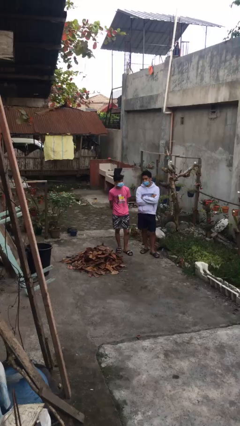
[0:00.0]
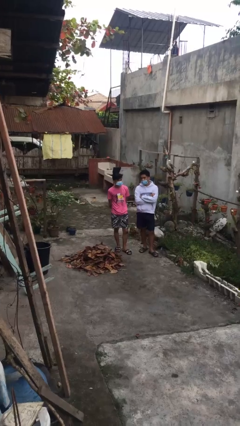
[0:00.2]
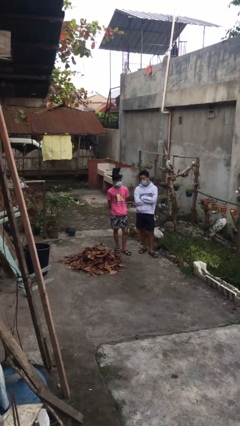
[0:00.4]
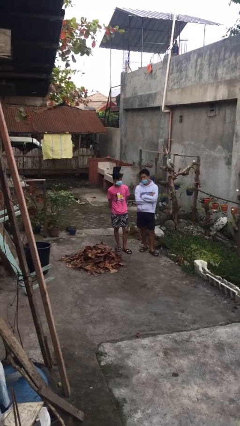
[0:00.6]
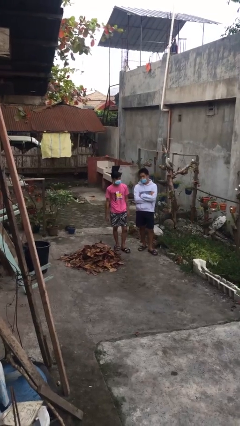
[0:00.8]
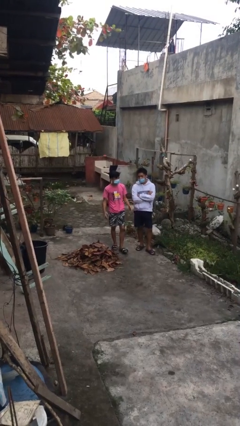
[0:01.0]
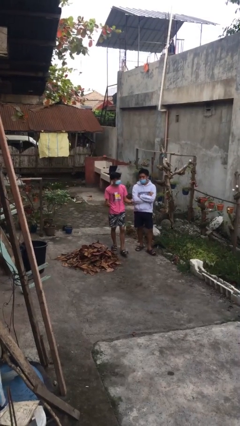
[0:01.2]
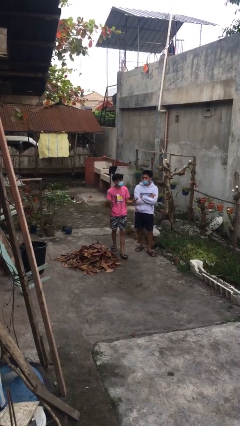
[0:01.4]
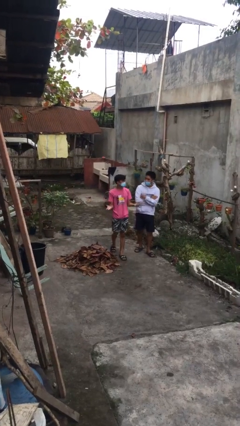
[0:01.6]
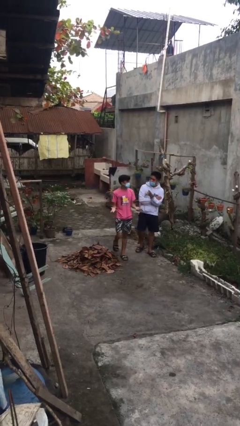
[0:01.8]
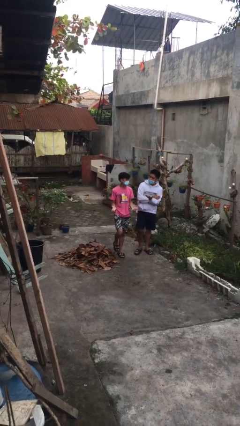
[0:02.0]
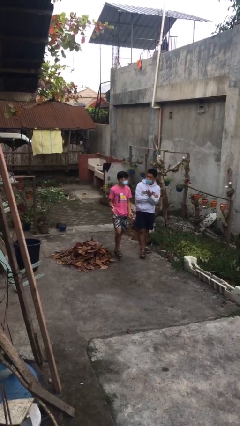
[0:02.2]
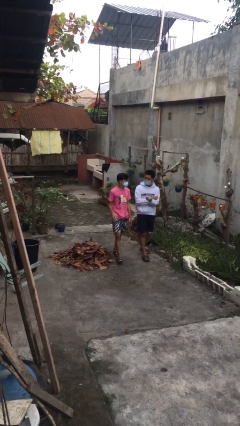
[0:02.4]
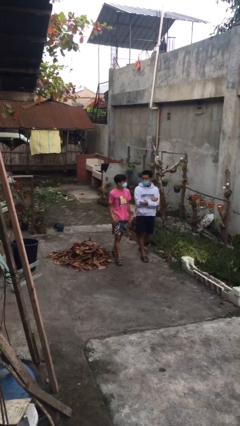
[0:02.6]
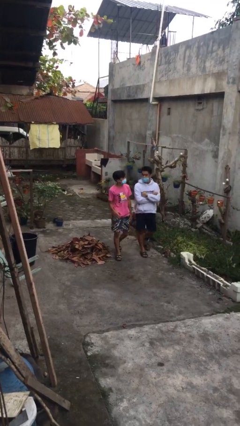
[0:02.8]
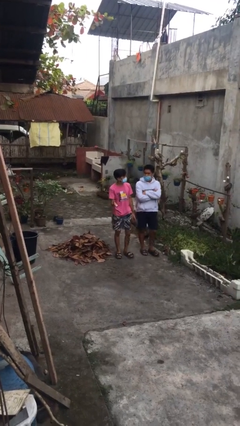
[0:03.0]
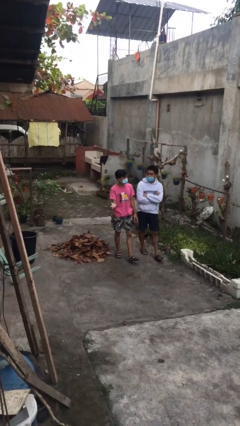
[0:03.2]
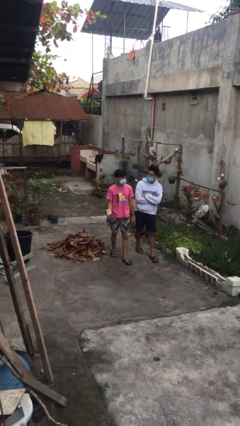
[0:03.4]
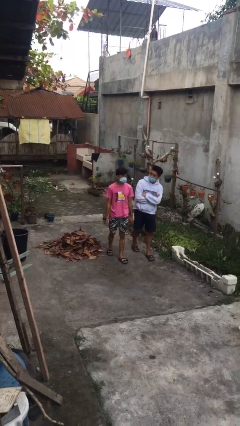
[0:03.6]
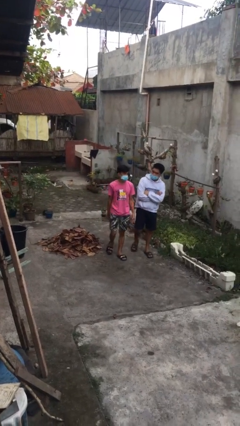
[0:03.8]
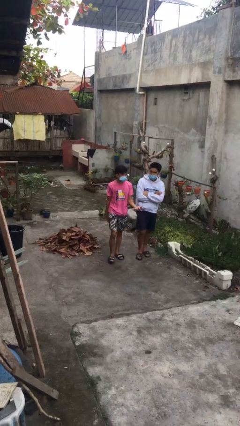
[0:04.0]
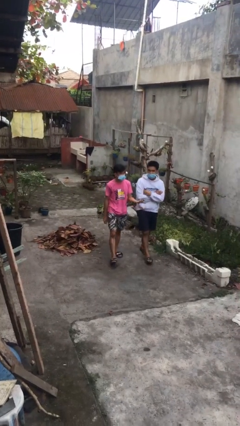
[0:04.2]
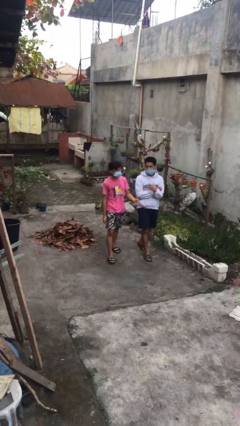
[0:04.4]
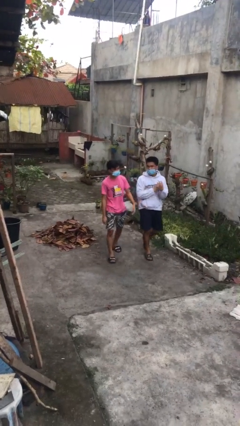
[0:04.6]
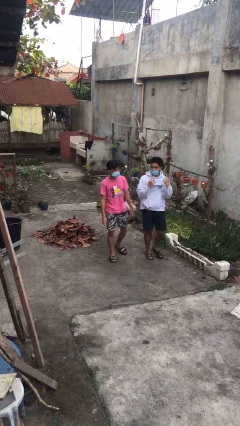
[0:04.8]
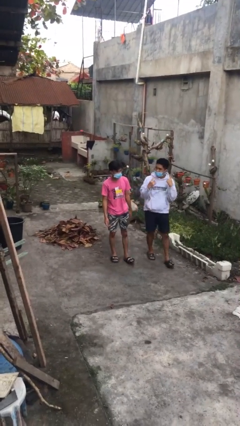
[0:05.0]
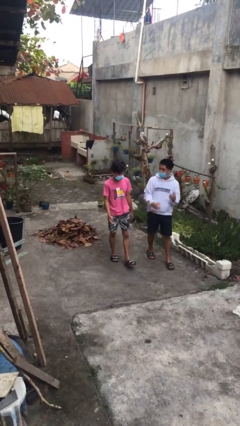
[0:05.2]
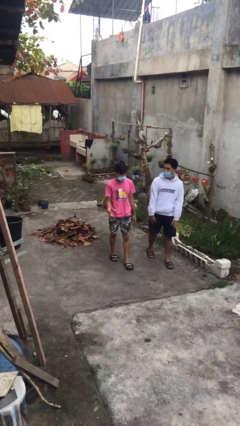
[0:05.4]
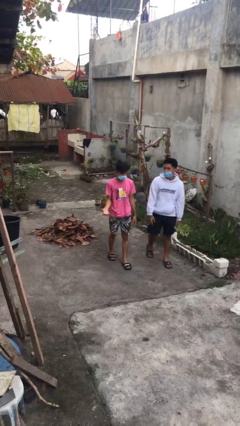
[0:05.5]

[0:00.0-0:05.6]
person talks to person

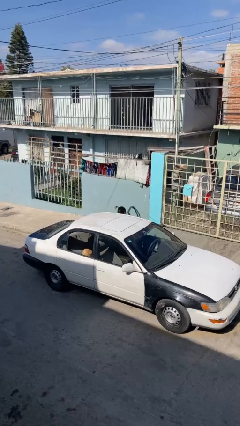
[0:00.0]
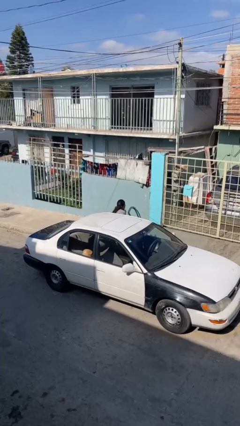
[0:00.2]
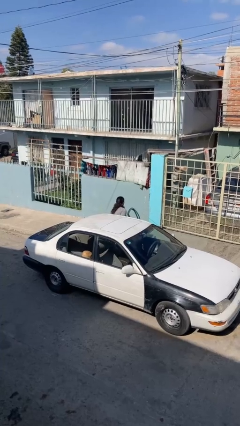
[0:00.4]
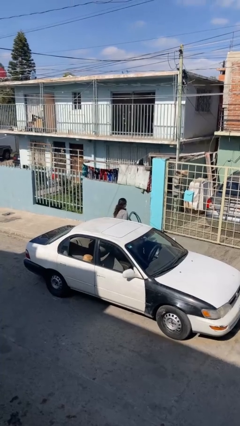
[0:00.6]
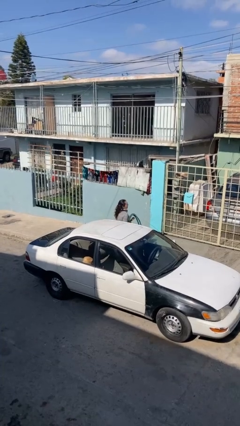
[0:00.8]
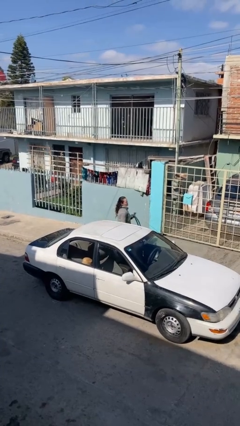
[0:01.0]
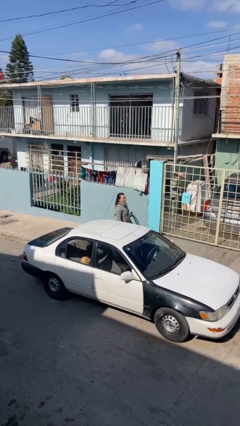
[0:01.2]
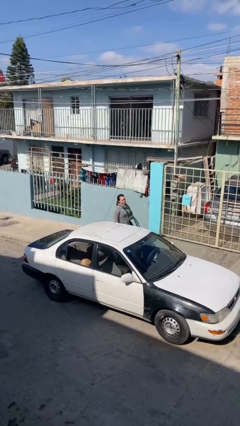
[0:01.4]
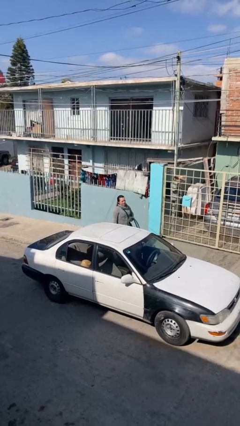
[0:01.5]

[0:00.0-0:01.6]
person exits car

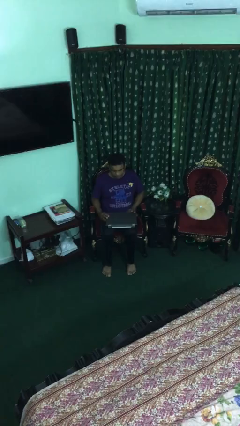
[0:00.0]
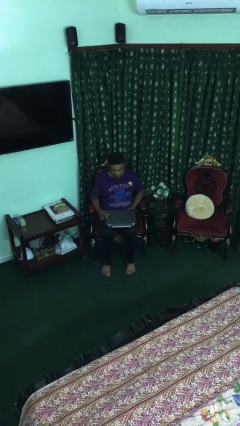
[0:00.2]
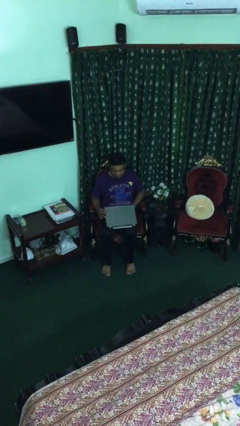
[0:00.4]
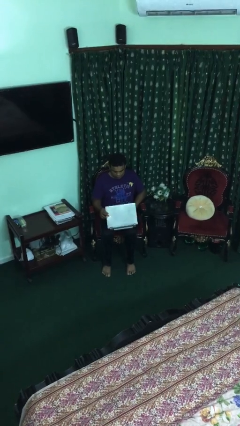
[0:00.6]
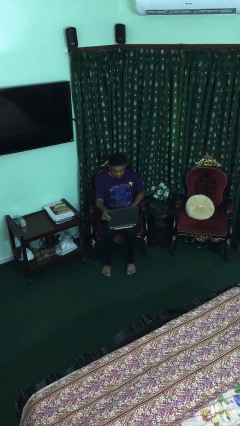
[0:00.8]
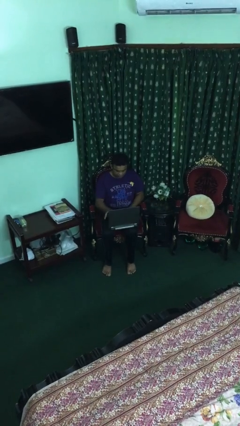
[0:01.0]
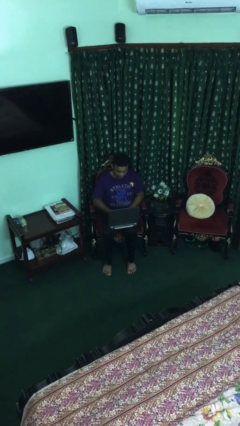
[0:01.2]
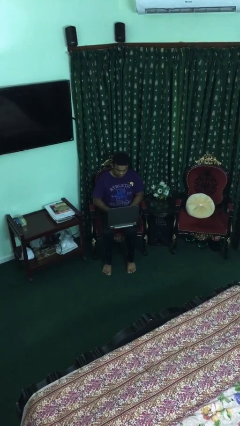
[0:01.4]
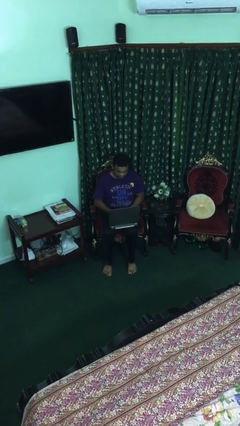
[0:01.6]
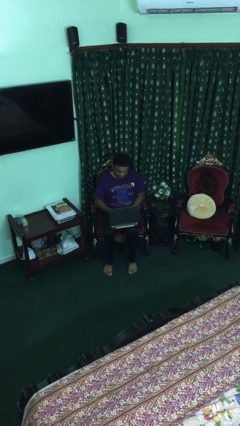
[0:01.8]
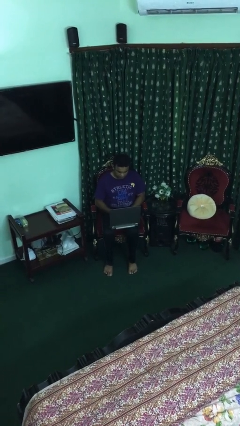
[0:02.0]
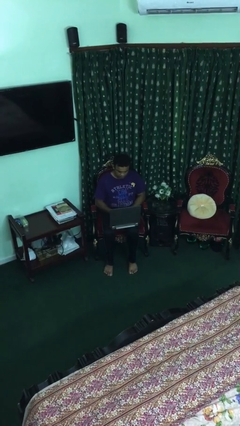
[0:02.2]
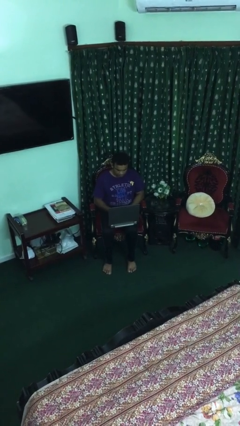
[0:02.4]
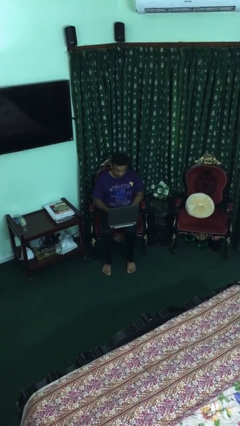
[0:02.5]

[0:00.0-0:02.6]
person interacts with laptop

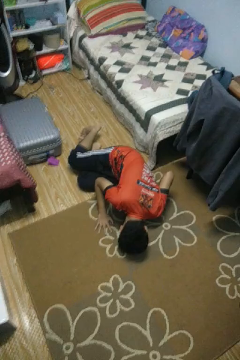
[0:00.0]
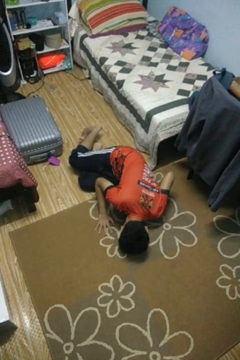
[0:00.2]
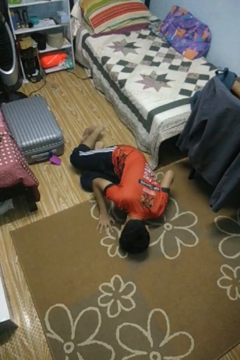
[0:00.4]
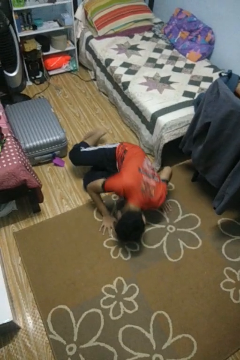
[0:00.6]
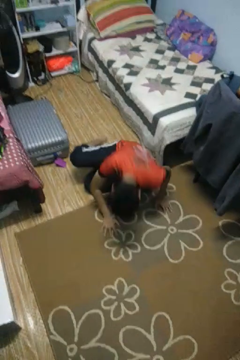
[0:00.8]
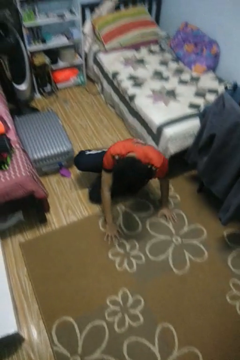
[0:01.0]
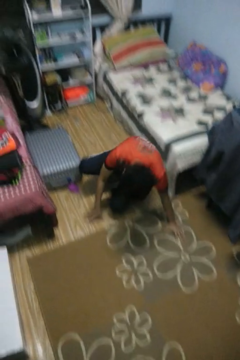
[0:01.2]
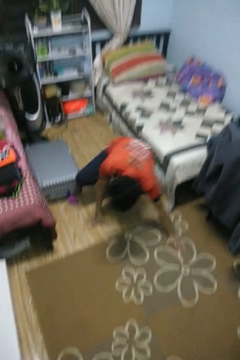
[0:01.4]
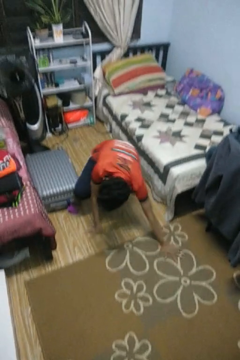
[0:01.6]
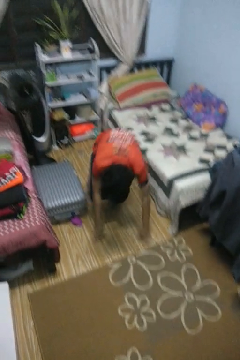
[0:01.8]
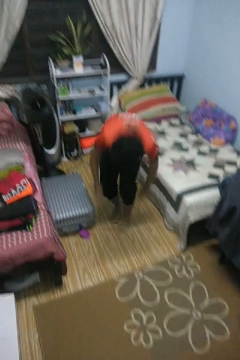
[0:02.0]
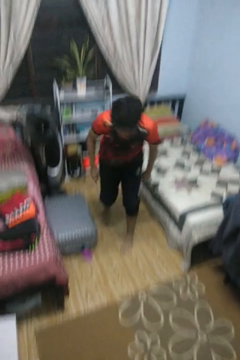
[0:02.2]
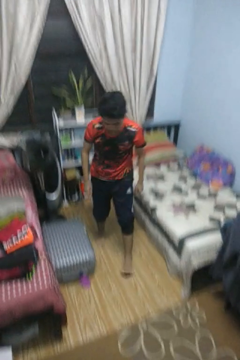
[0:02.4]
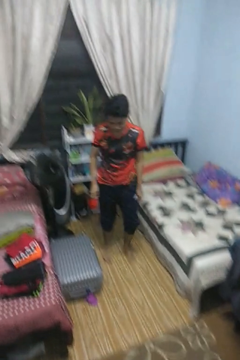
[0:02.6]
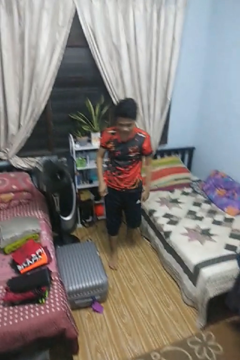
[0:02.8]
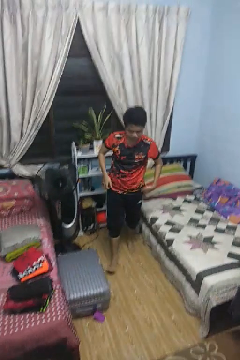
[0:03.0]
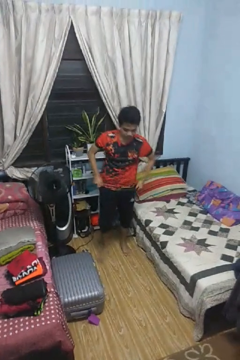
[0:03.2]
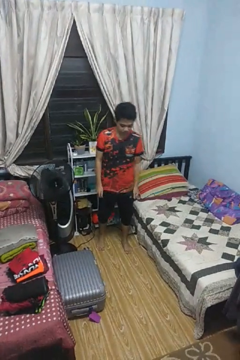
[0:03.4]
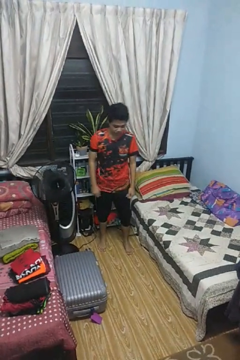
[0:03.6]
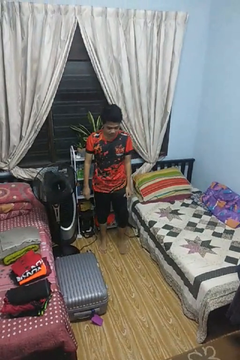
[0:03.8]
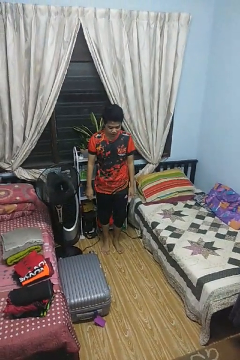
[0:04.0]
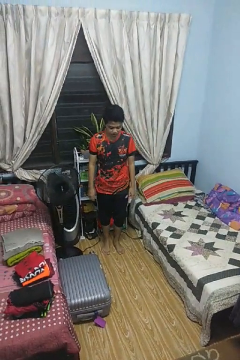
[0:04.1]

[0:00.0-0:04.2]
person stands up from floor

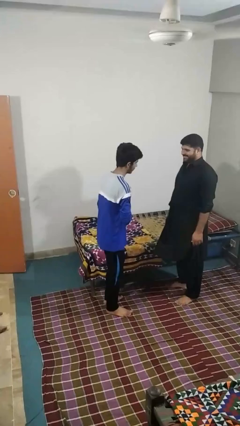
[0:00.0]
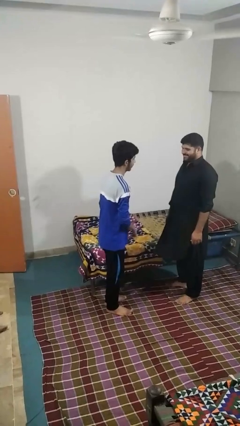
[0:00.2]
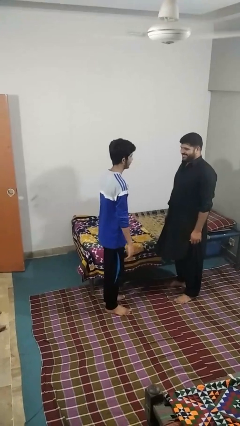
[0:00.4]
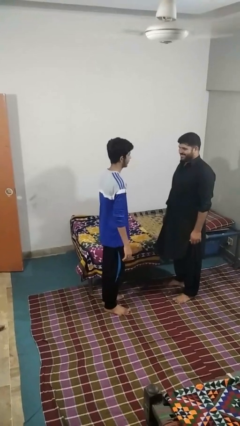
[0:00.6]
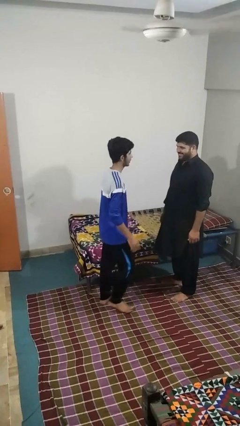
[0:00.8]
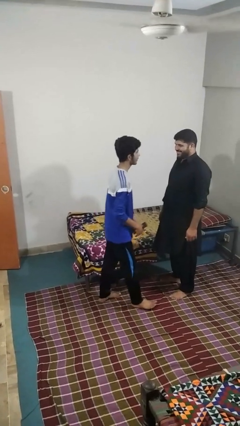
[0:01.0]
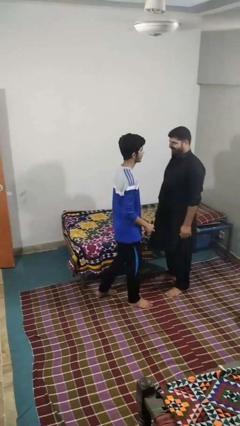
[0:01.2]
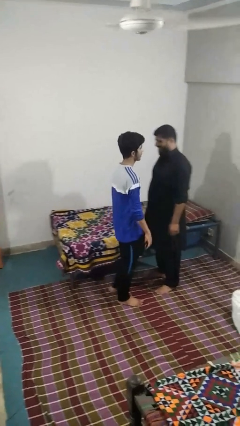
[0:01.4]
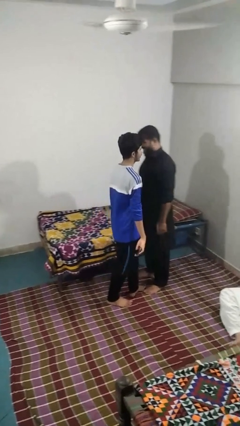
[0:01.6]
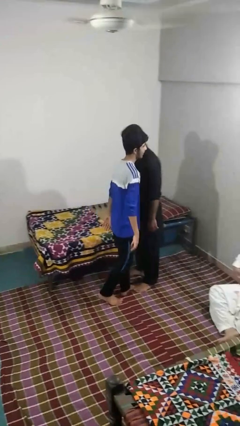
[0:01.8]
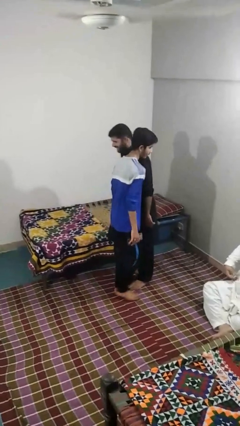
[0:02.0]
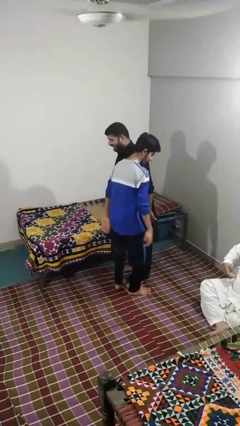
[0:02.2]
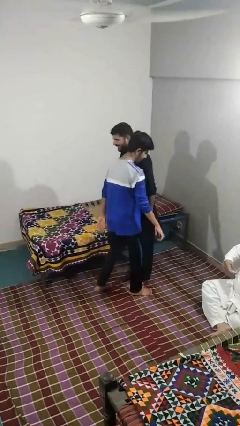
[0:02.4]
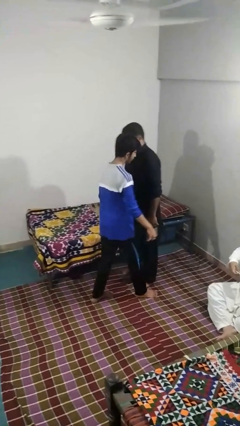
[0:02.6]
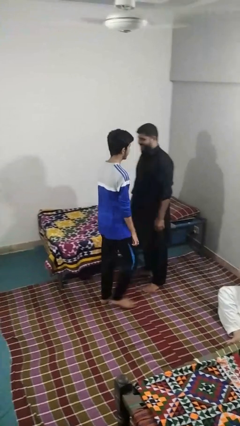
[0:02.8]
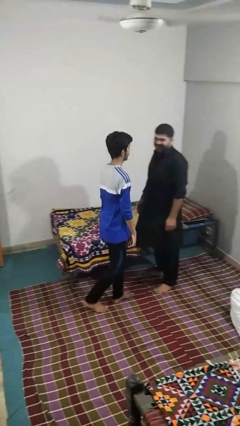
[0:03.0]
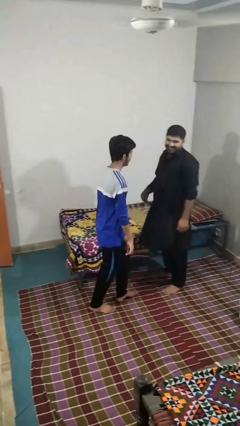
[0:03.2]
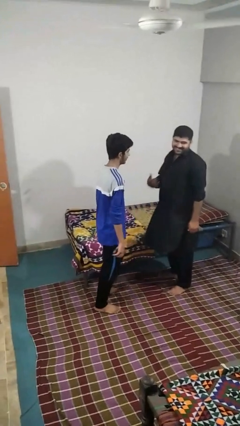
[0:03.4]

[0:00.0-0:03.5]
person bumps into person

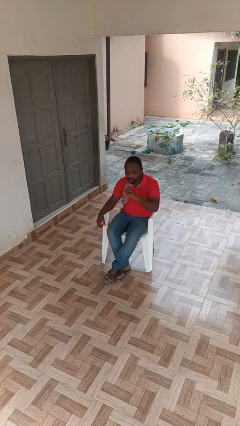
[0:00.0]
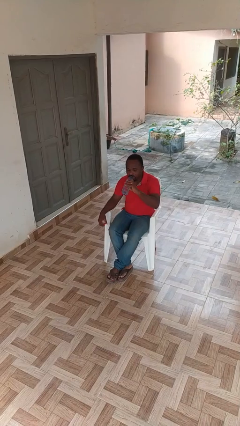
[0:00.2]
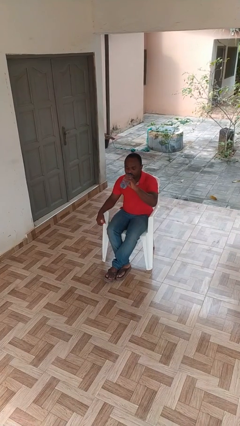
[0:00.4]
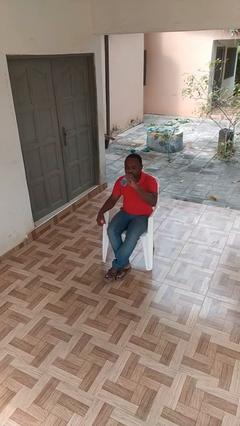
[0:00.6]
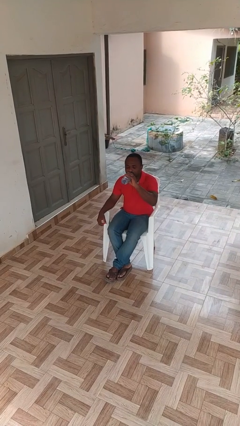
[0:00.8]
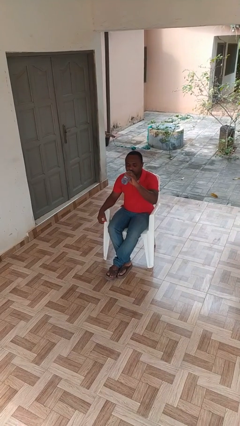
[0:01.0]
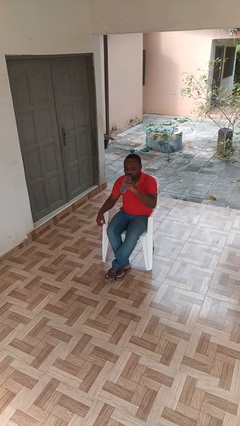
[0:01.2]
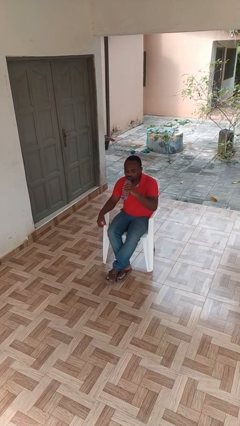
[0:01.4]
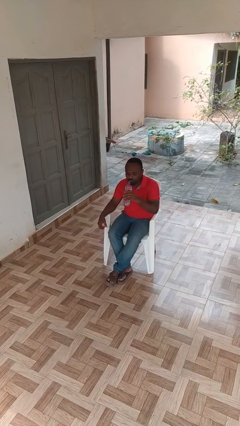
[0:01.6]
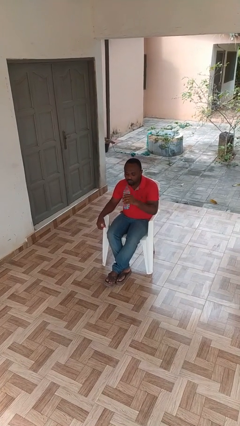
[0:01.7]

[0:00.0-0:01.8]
person drinks from bottle
